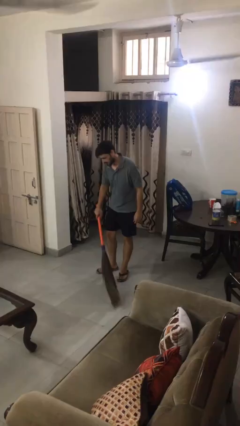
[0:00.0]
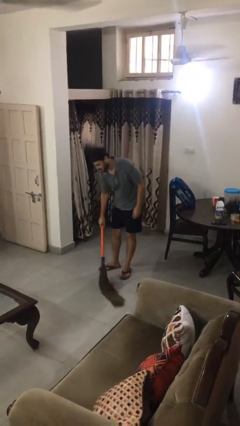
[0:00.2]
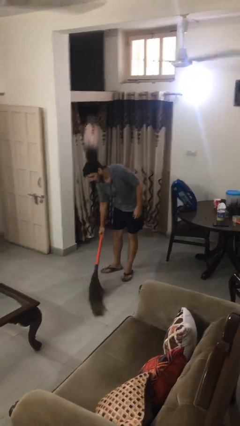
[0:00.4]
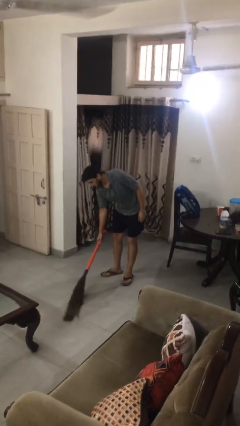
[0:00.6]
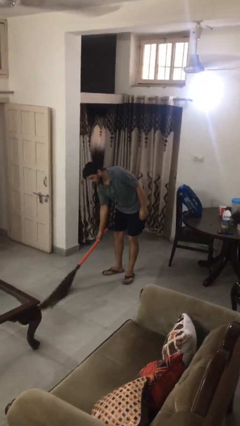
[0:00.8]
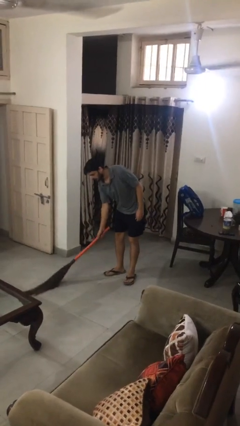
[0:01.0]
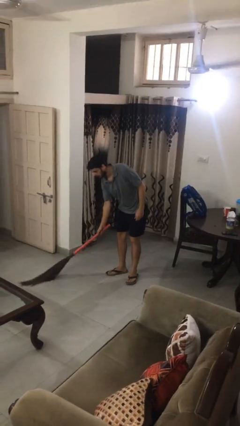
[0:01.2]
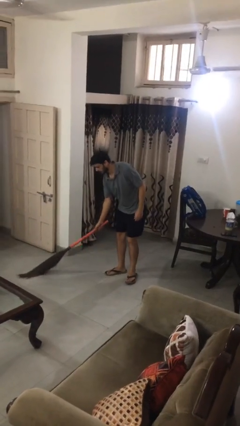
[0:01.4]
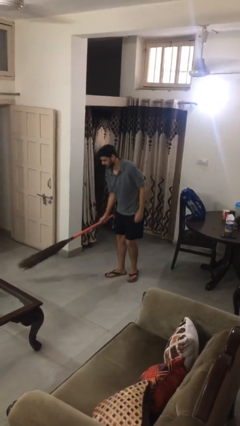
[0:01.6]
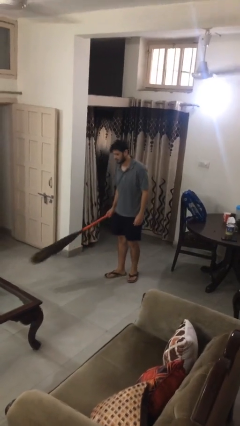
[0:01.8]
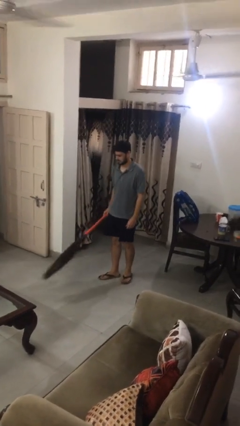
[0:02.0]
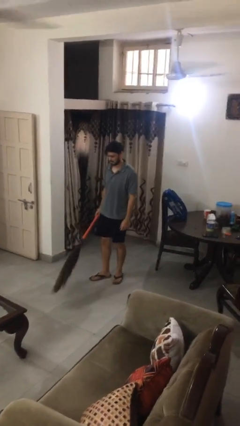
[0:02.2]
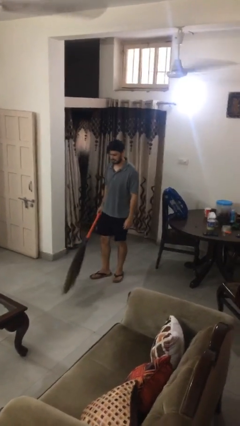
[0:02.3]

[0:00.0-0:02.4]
person sweeps floor

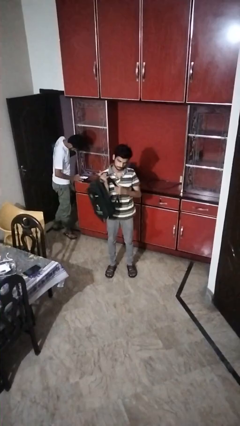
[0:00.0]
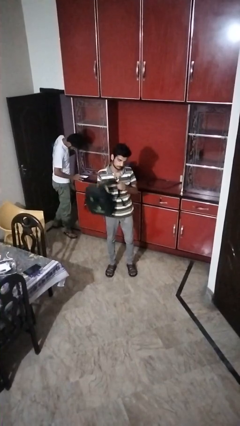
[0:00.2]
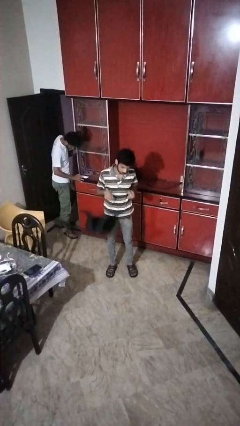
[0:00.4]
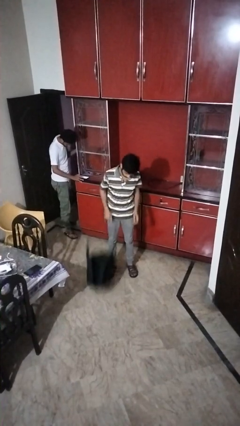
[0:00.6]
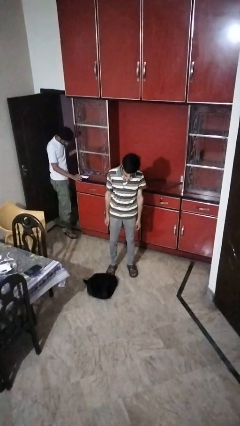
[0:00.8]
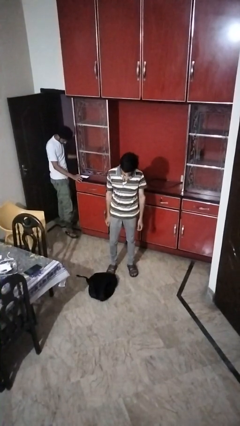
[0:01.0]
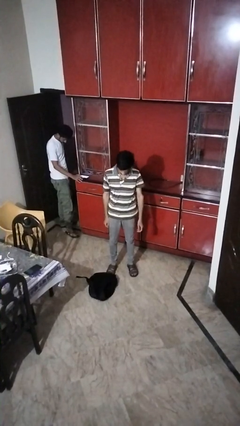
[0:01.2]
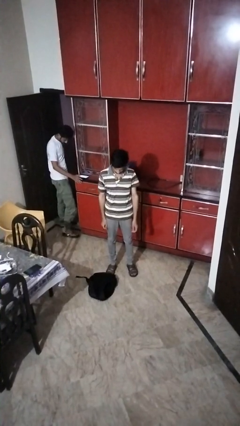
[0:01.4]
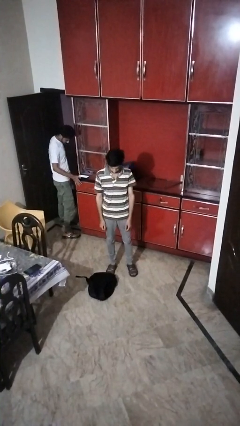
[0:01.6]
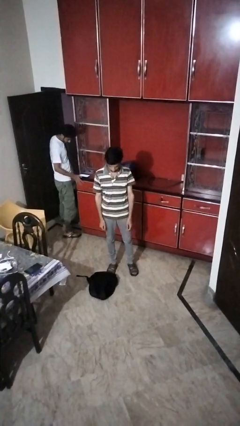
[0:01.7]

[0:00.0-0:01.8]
person drops object

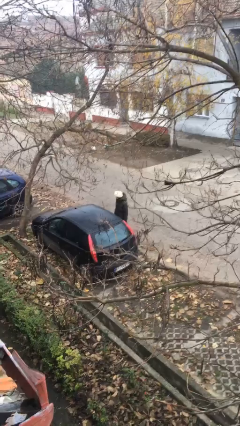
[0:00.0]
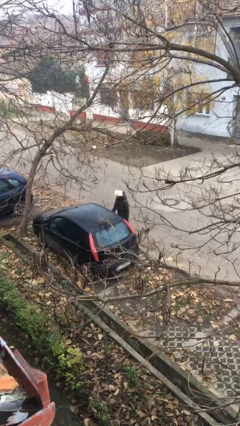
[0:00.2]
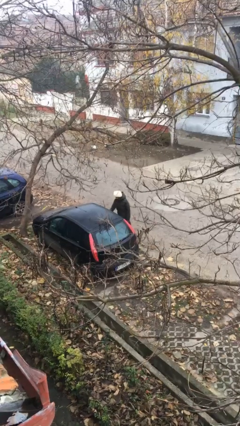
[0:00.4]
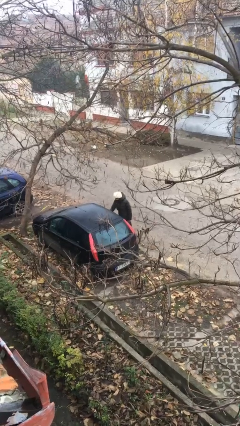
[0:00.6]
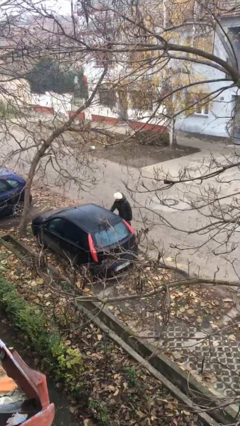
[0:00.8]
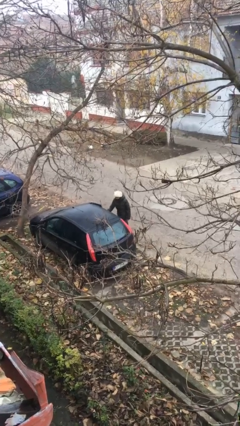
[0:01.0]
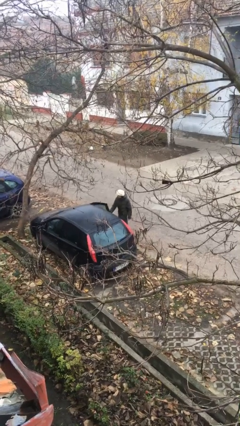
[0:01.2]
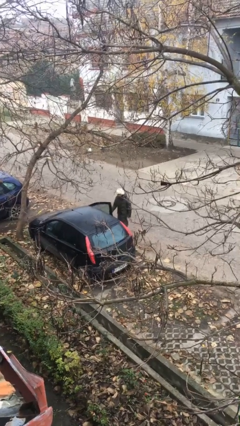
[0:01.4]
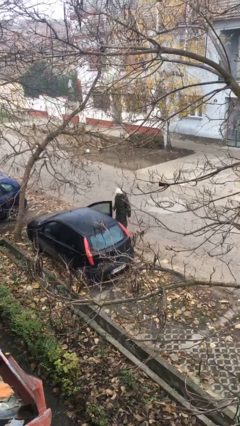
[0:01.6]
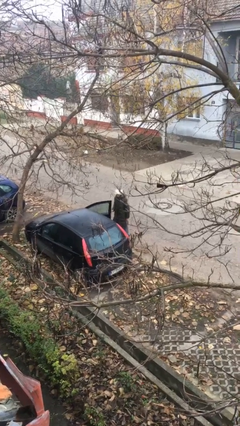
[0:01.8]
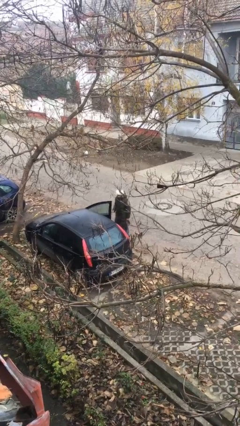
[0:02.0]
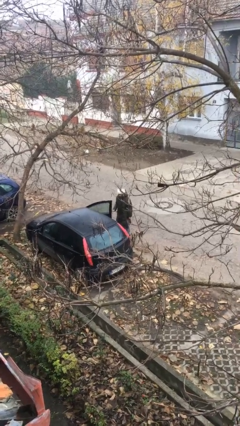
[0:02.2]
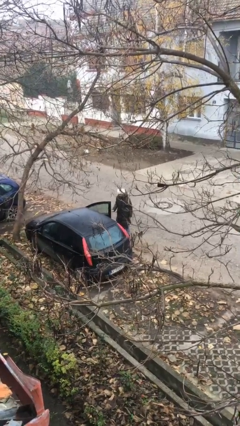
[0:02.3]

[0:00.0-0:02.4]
person opens car door

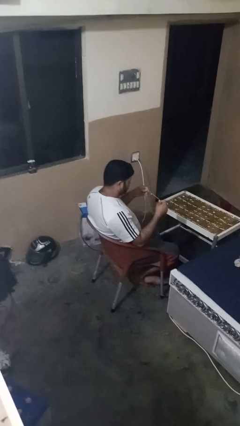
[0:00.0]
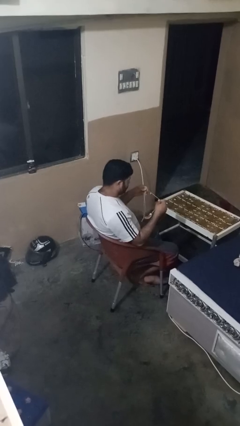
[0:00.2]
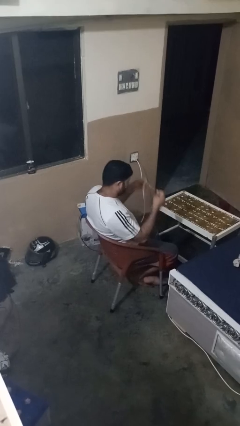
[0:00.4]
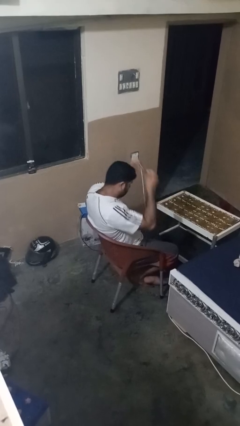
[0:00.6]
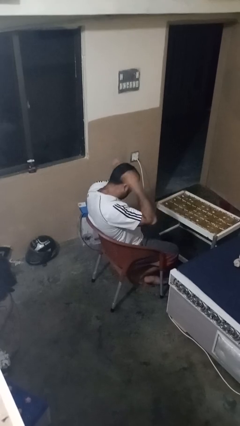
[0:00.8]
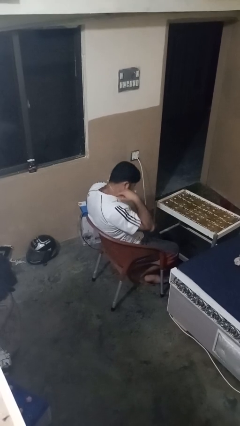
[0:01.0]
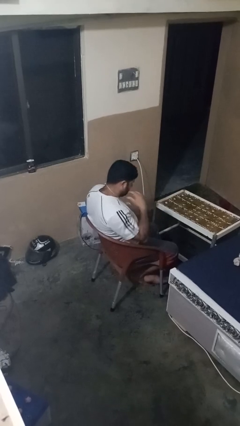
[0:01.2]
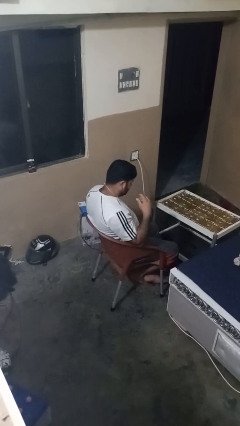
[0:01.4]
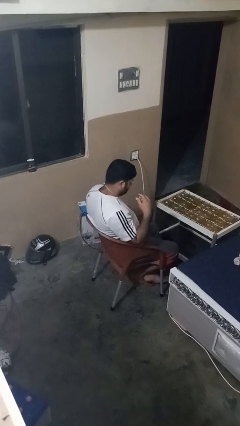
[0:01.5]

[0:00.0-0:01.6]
person puts on necklace

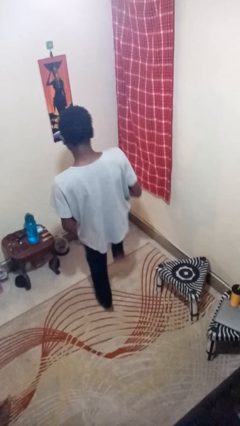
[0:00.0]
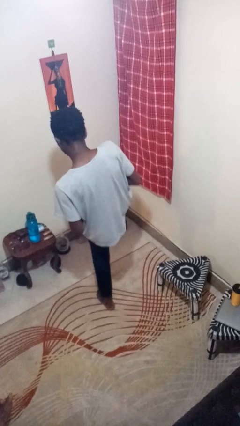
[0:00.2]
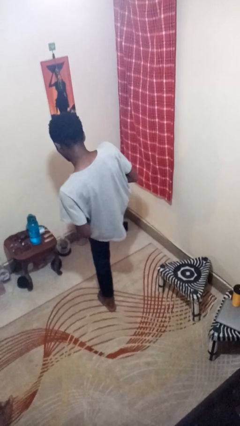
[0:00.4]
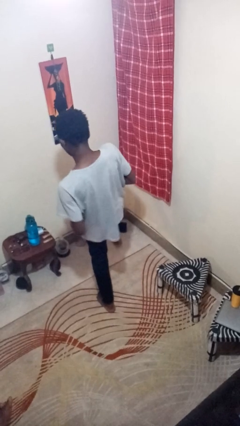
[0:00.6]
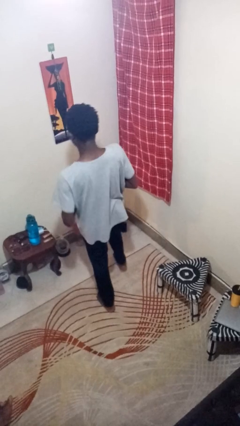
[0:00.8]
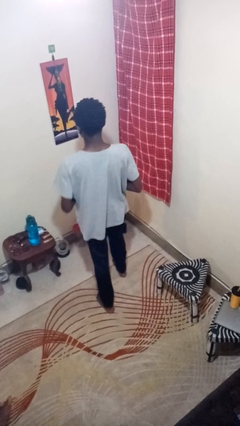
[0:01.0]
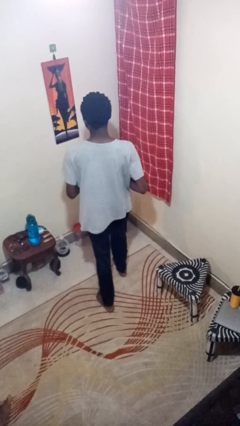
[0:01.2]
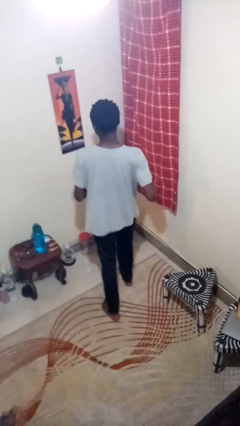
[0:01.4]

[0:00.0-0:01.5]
person karate kicks

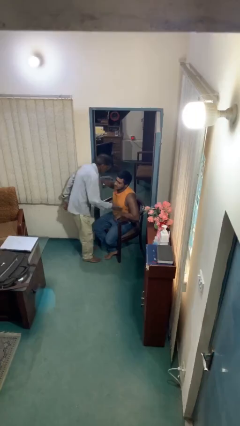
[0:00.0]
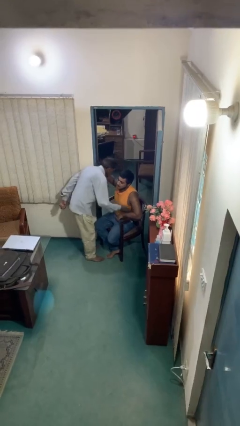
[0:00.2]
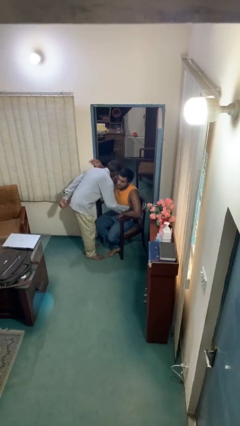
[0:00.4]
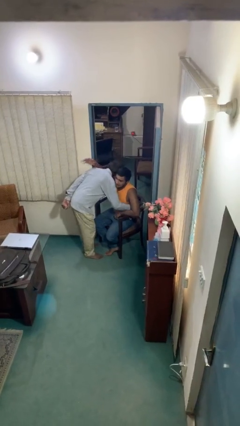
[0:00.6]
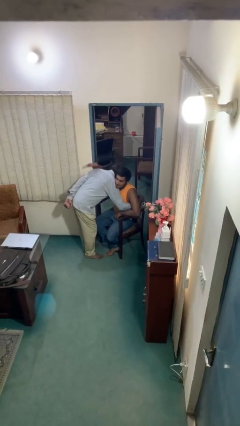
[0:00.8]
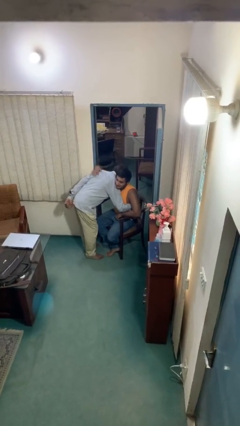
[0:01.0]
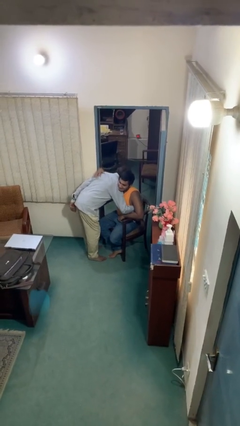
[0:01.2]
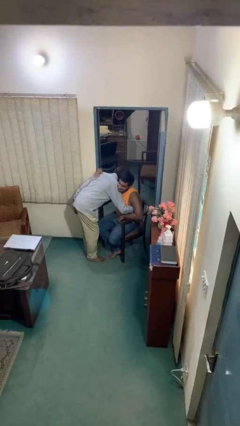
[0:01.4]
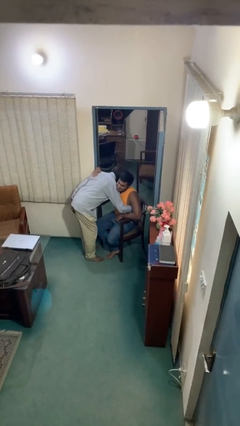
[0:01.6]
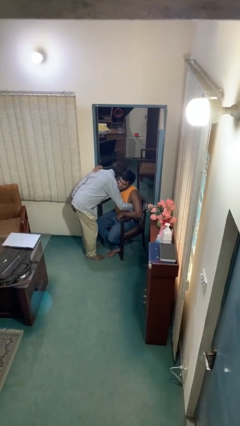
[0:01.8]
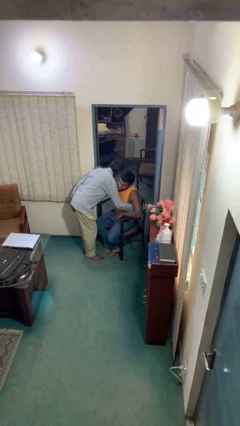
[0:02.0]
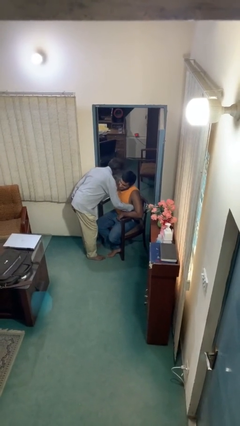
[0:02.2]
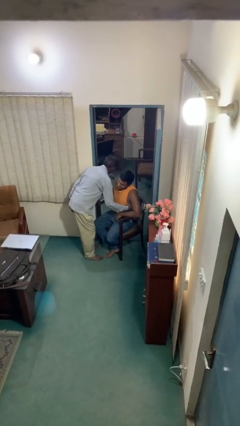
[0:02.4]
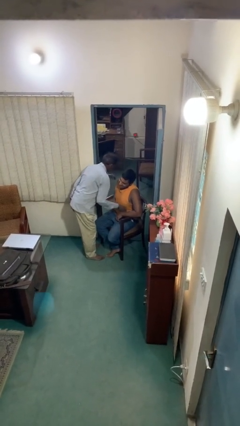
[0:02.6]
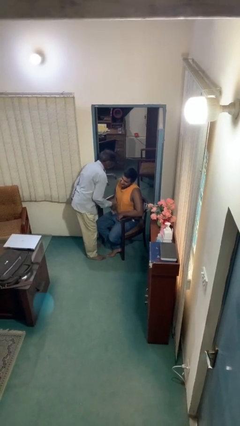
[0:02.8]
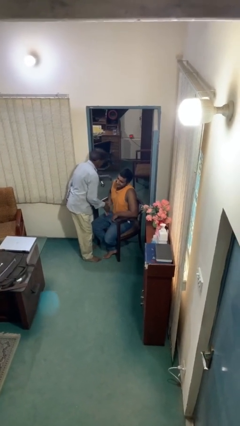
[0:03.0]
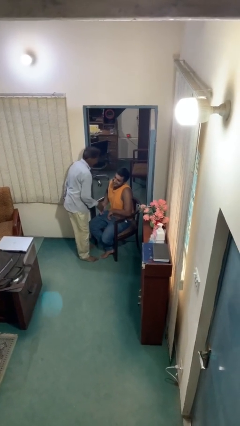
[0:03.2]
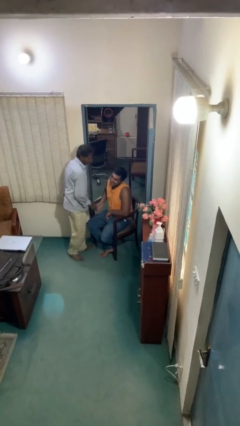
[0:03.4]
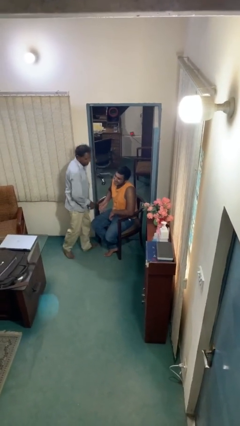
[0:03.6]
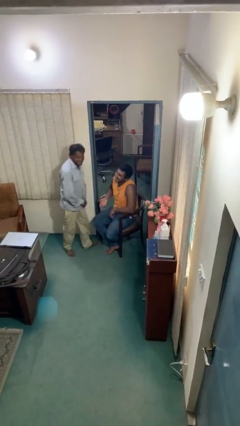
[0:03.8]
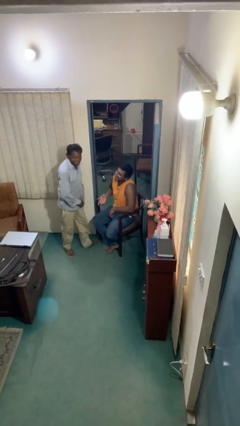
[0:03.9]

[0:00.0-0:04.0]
person embraces person

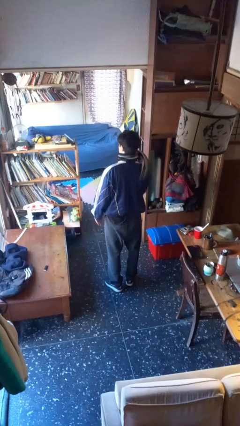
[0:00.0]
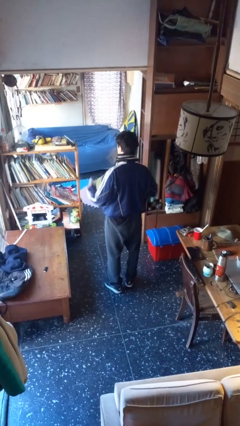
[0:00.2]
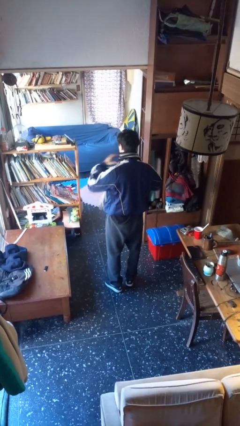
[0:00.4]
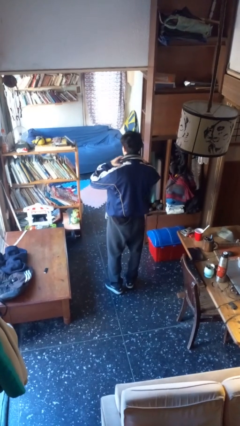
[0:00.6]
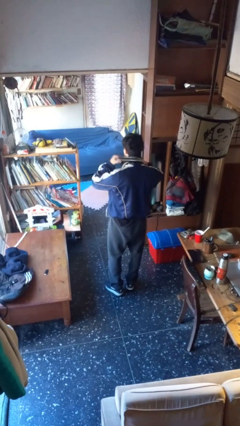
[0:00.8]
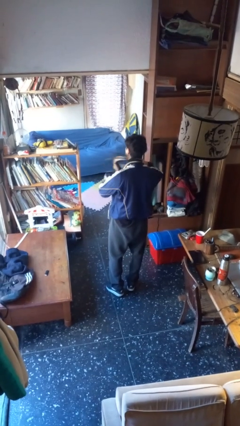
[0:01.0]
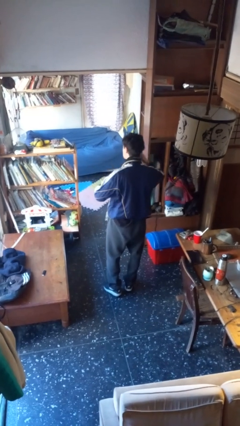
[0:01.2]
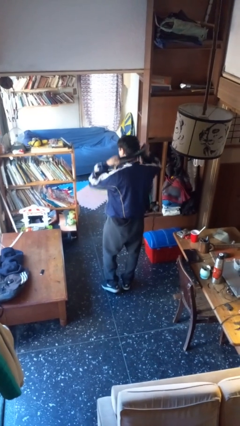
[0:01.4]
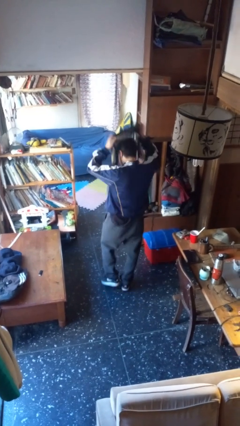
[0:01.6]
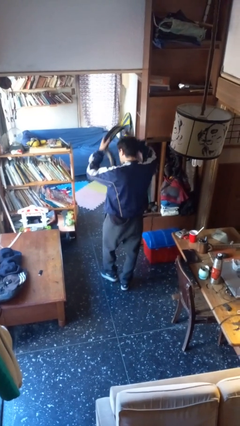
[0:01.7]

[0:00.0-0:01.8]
person takes off scarf

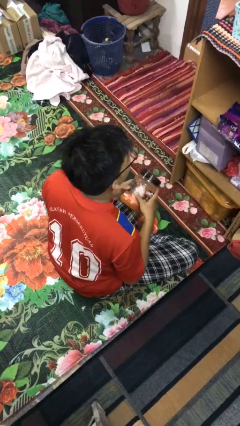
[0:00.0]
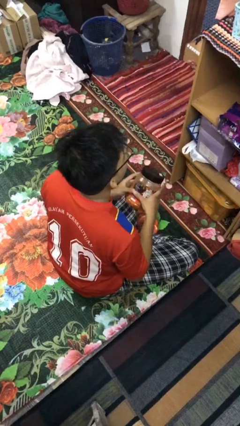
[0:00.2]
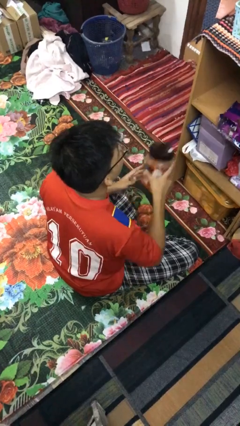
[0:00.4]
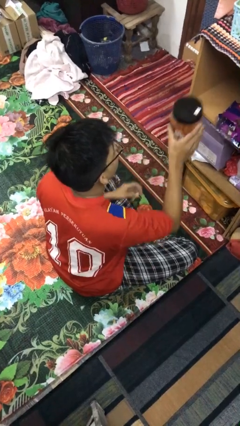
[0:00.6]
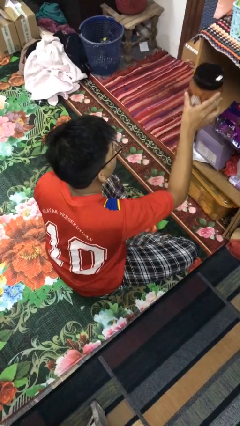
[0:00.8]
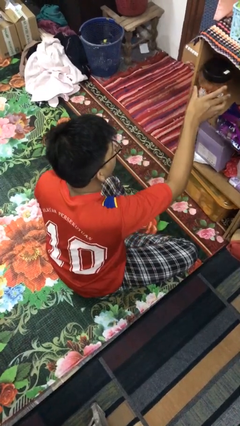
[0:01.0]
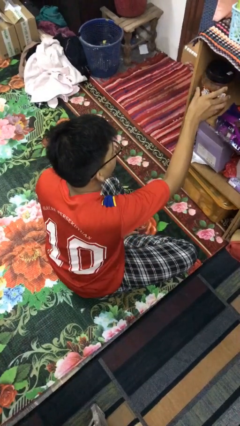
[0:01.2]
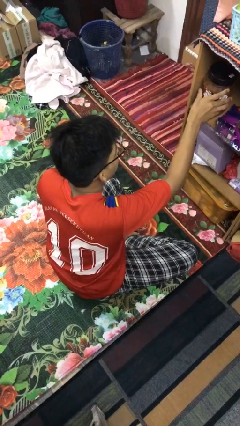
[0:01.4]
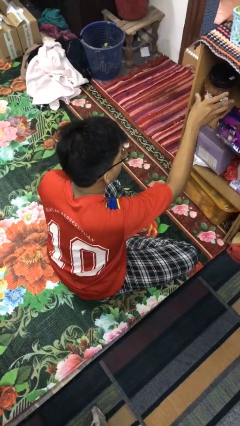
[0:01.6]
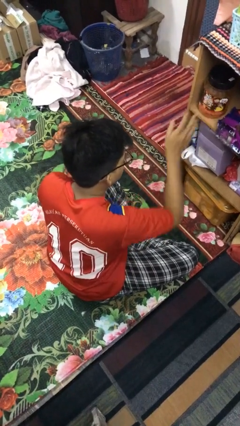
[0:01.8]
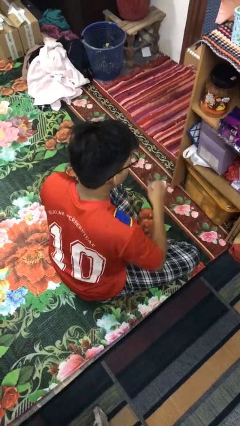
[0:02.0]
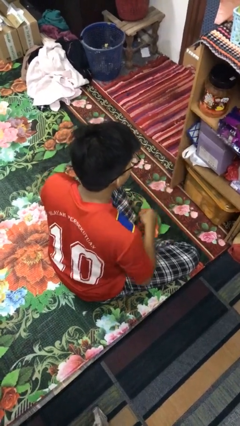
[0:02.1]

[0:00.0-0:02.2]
person puts down object into cabinet
